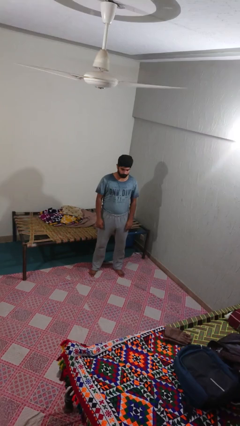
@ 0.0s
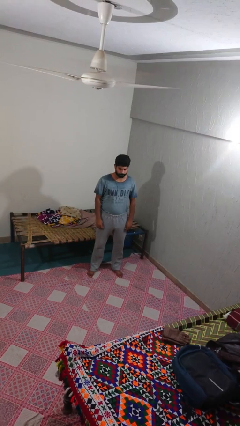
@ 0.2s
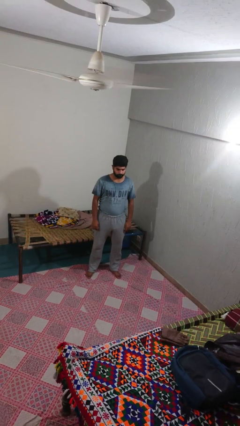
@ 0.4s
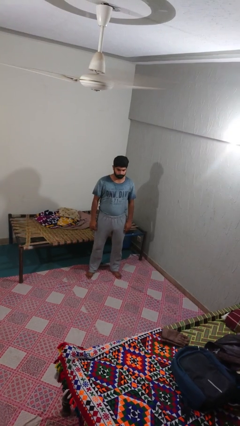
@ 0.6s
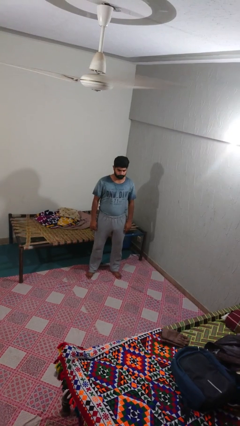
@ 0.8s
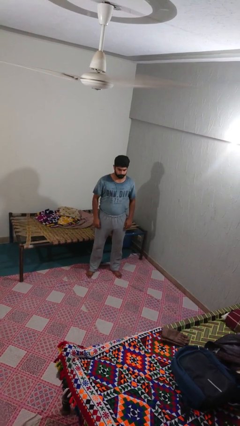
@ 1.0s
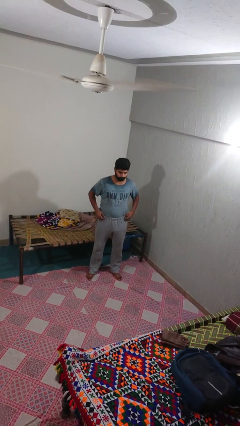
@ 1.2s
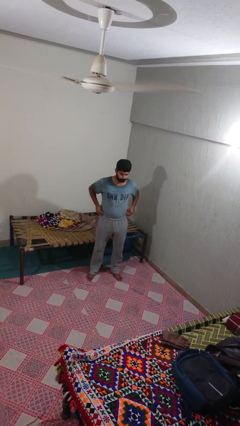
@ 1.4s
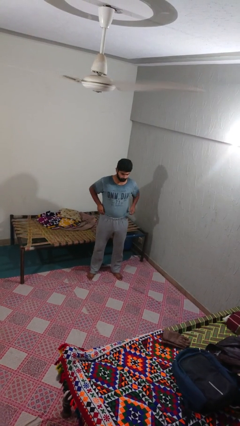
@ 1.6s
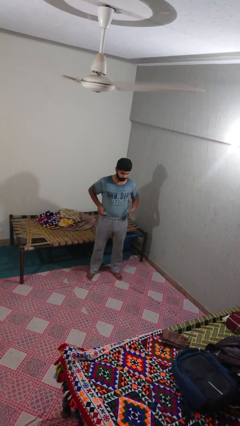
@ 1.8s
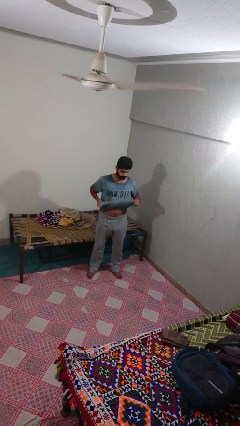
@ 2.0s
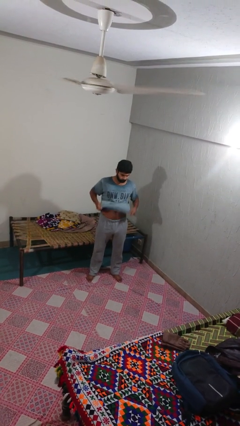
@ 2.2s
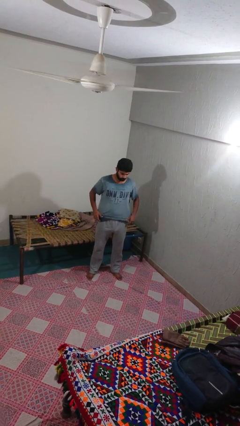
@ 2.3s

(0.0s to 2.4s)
person untucks shirt

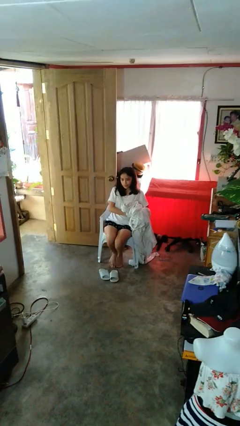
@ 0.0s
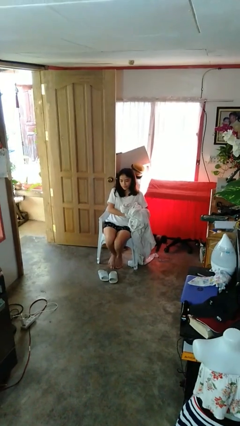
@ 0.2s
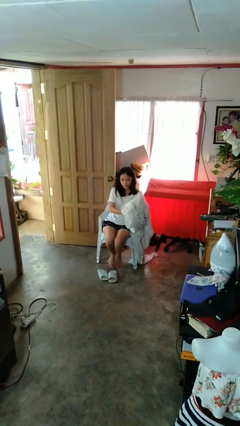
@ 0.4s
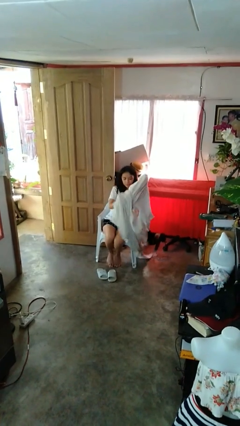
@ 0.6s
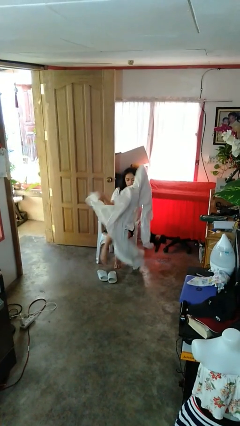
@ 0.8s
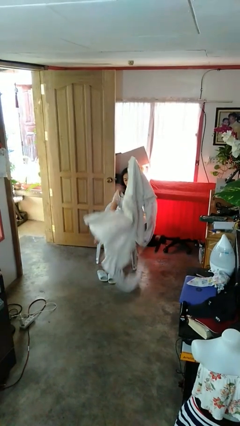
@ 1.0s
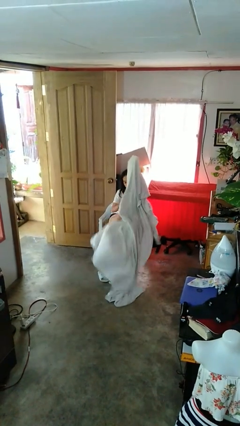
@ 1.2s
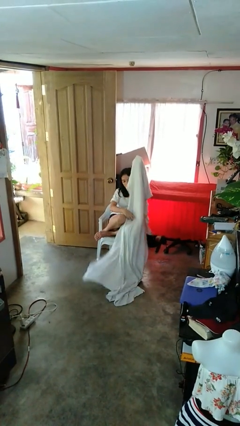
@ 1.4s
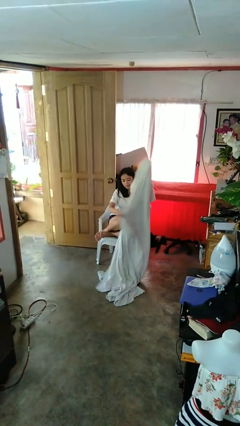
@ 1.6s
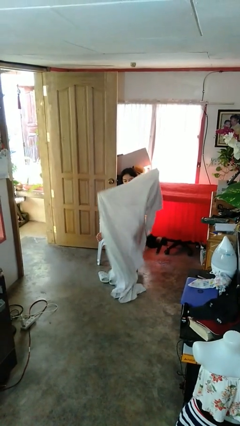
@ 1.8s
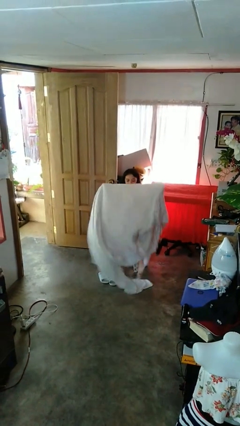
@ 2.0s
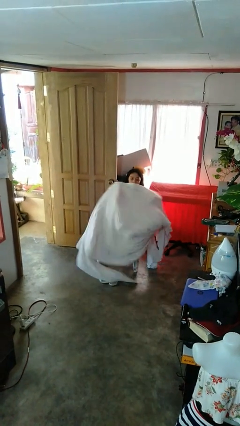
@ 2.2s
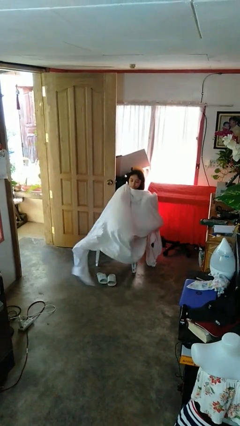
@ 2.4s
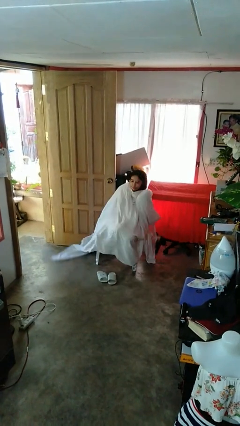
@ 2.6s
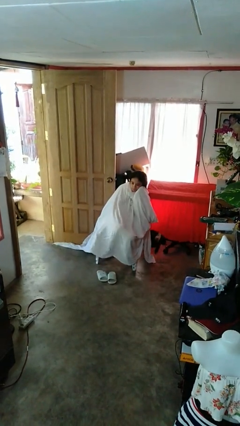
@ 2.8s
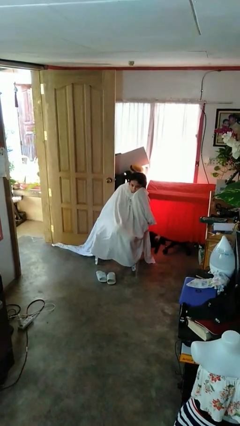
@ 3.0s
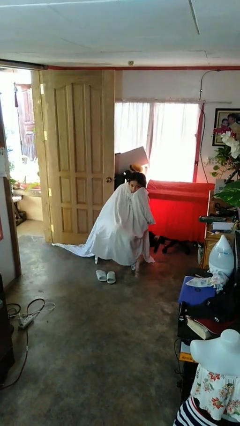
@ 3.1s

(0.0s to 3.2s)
person covers with blanket

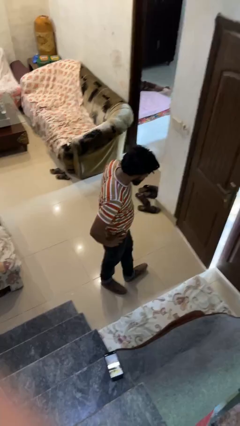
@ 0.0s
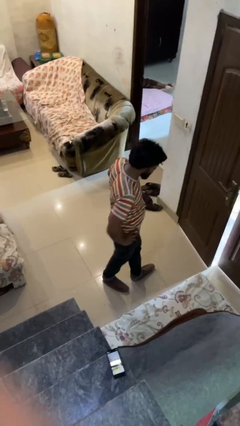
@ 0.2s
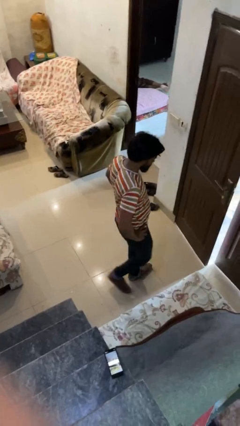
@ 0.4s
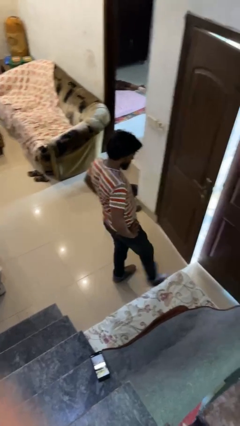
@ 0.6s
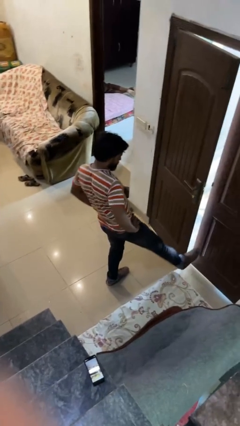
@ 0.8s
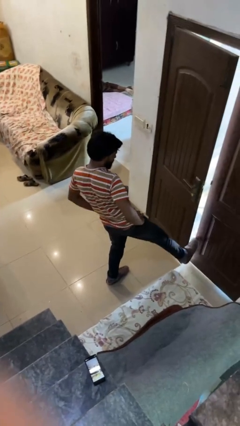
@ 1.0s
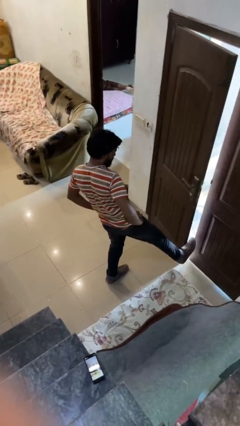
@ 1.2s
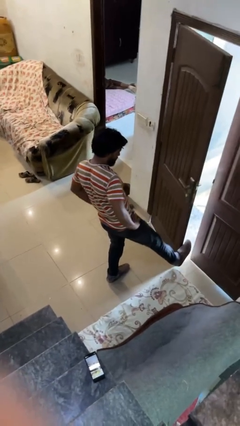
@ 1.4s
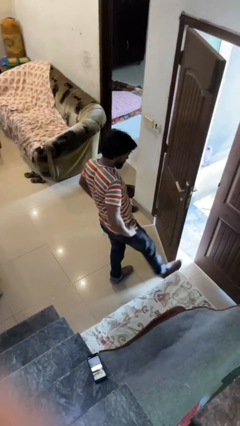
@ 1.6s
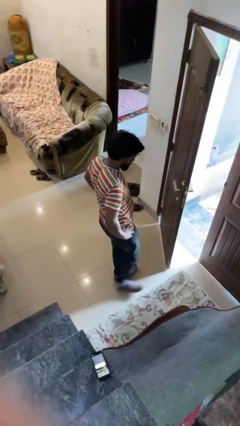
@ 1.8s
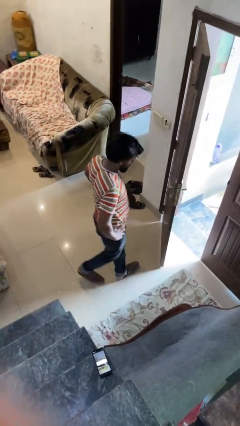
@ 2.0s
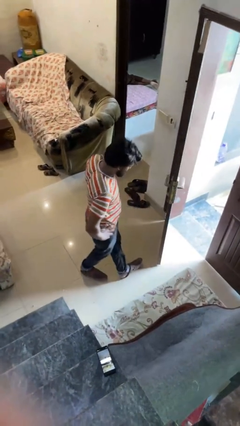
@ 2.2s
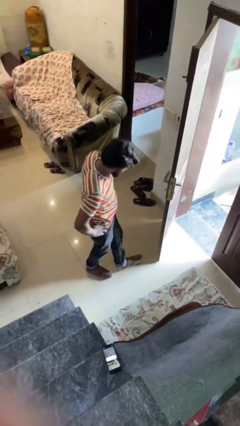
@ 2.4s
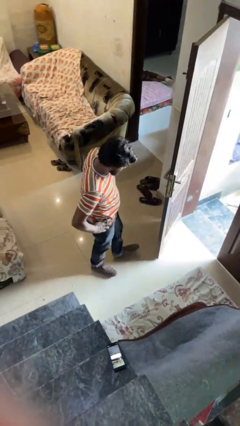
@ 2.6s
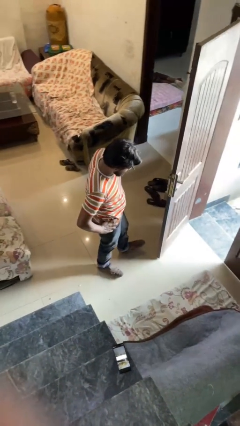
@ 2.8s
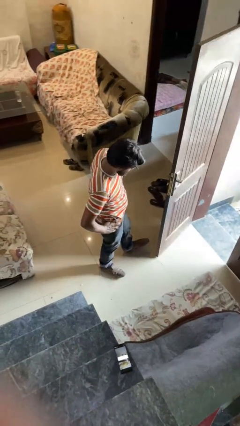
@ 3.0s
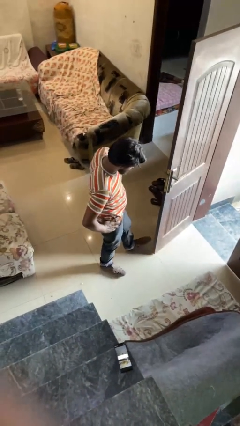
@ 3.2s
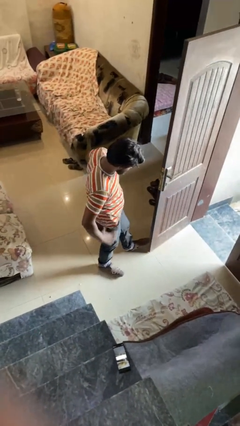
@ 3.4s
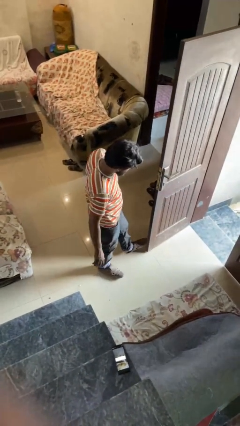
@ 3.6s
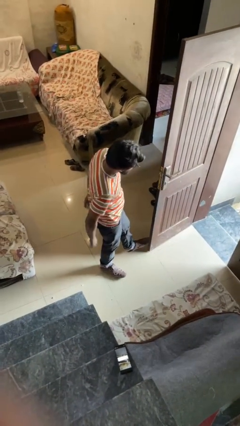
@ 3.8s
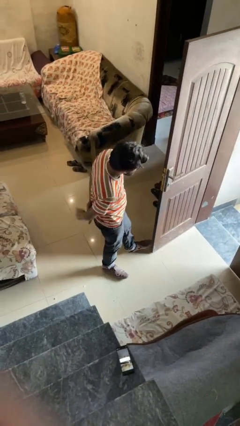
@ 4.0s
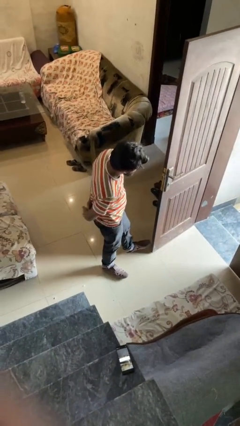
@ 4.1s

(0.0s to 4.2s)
person opens facility door

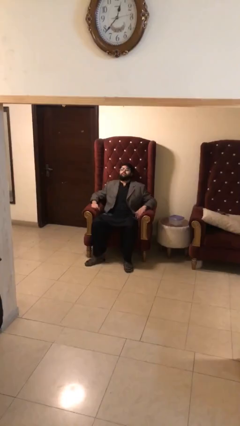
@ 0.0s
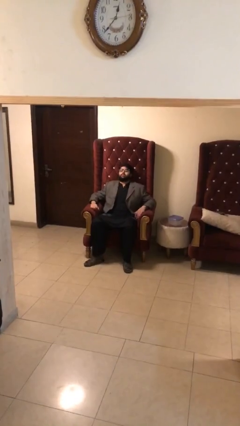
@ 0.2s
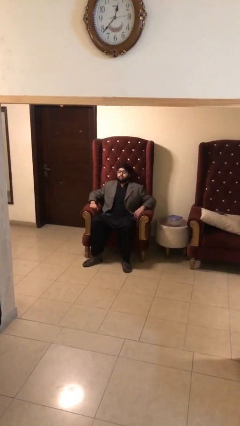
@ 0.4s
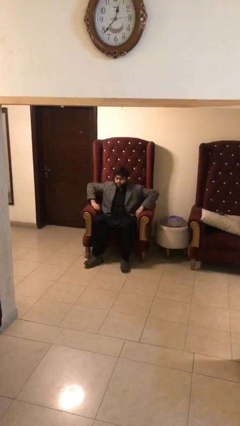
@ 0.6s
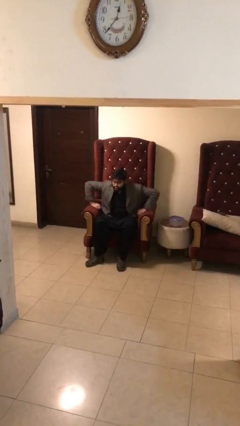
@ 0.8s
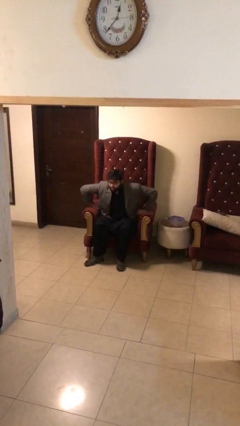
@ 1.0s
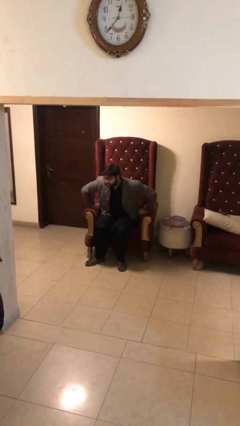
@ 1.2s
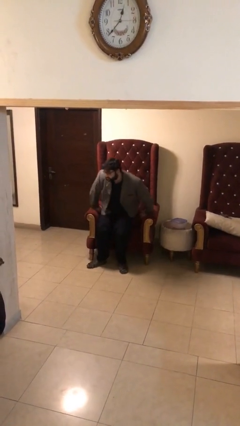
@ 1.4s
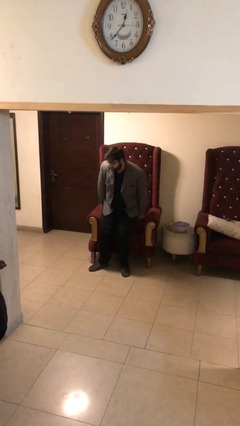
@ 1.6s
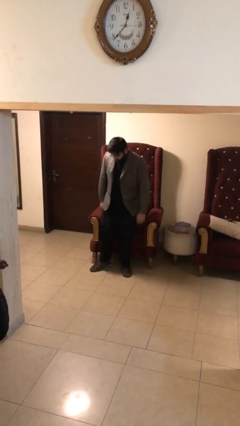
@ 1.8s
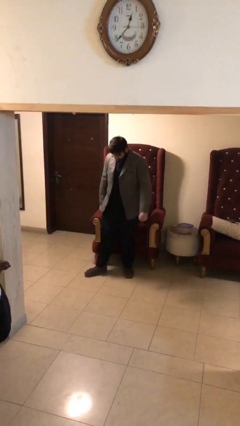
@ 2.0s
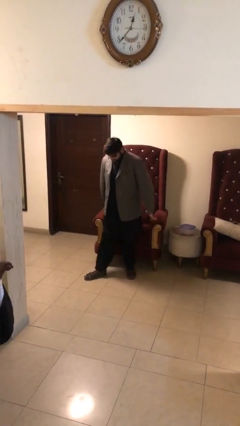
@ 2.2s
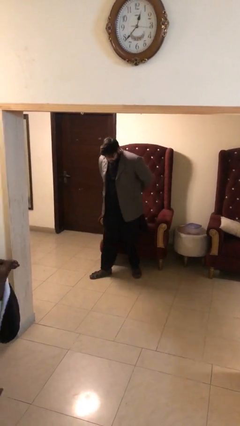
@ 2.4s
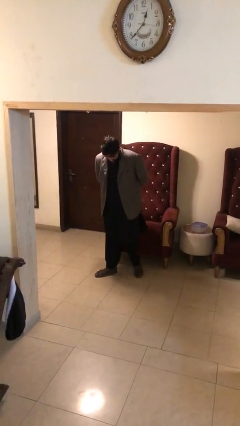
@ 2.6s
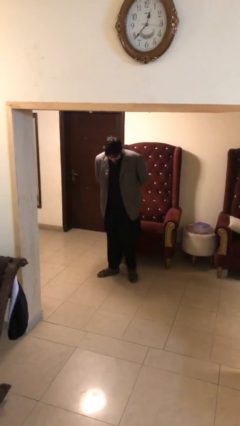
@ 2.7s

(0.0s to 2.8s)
person stands up

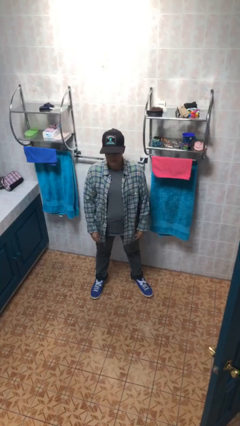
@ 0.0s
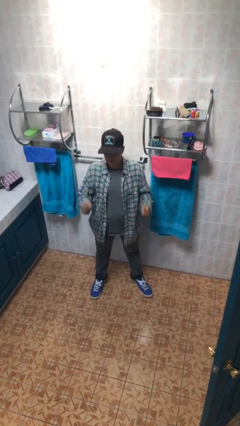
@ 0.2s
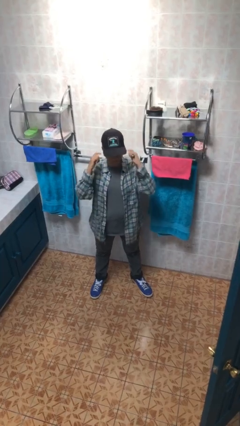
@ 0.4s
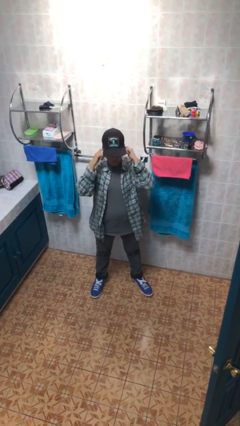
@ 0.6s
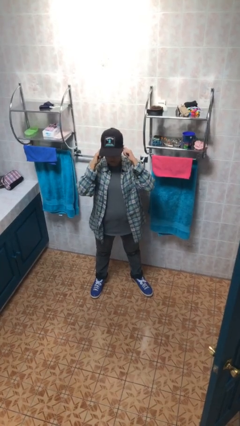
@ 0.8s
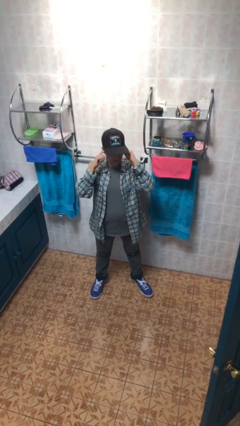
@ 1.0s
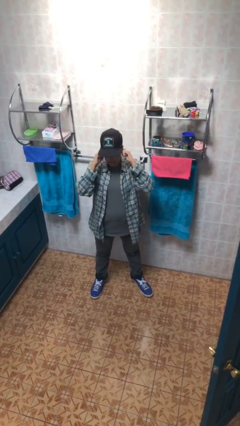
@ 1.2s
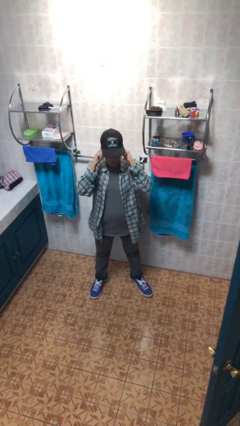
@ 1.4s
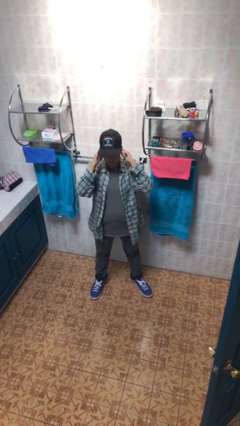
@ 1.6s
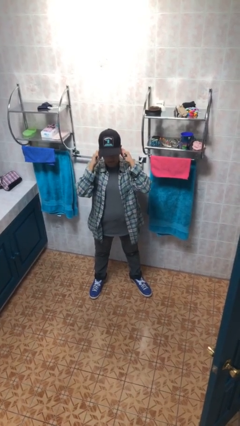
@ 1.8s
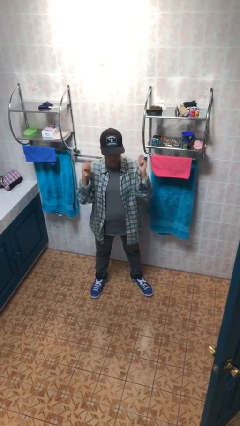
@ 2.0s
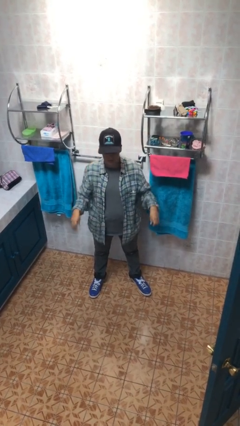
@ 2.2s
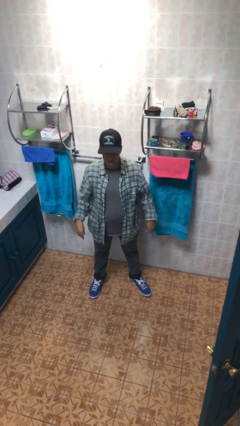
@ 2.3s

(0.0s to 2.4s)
person puts fingers in ear

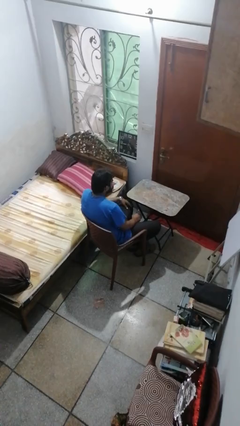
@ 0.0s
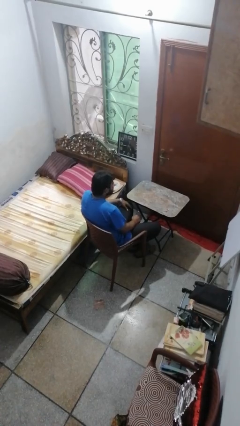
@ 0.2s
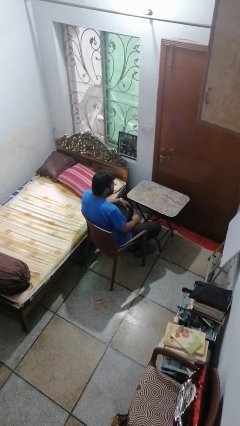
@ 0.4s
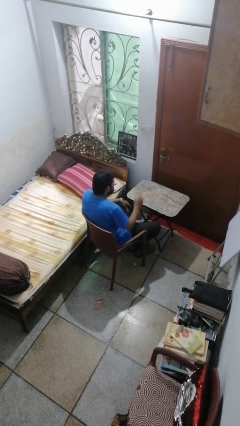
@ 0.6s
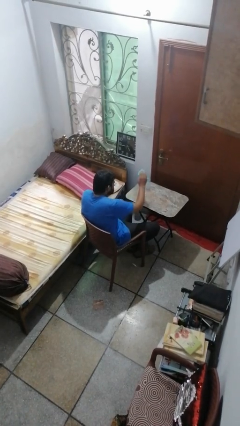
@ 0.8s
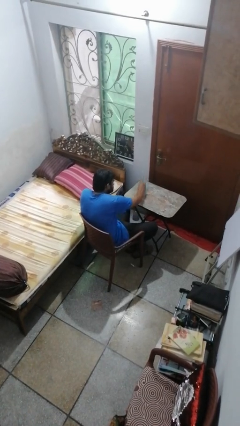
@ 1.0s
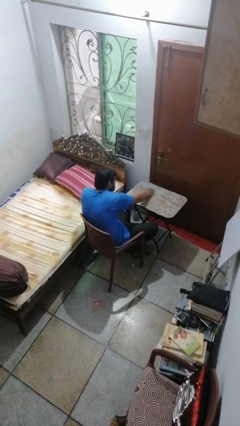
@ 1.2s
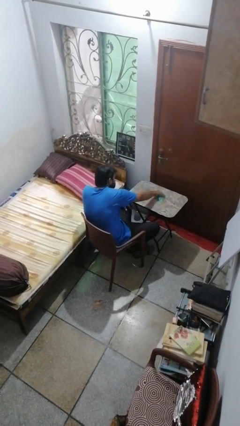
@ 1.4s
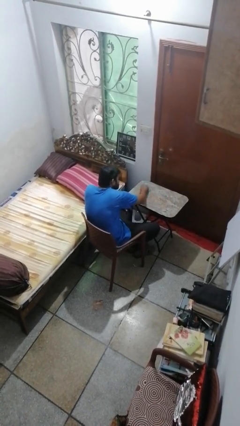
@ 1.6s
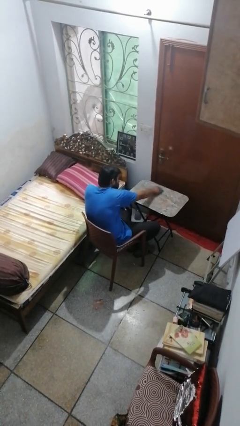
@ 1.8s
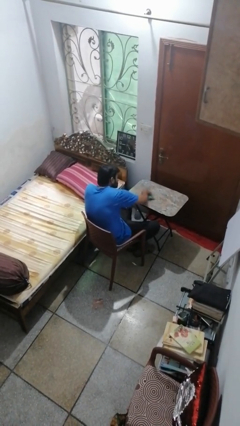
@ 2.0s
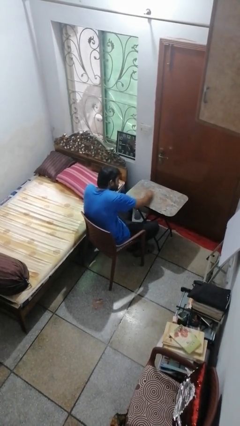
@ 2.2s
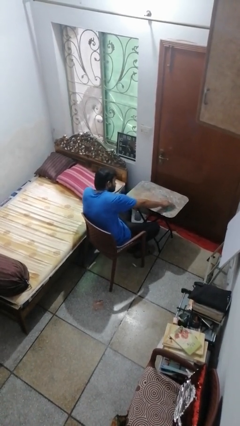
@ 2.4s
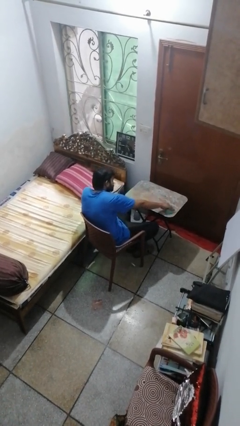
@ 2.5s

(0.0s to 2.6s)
person cleans table with rag
